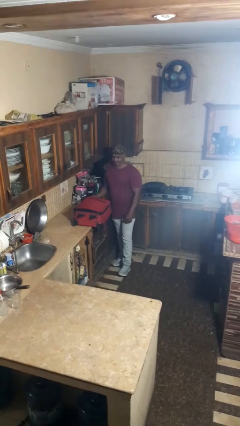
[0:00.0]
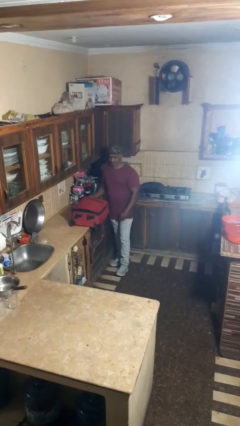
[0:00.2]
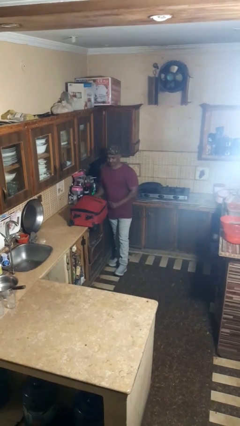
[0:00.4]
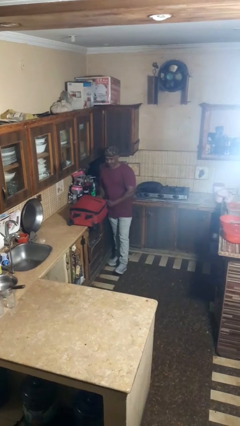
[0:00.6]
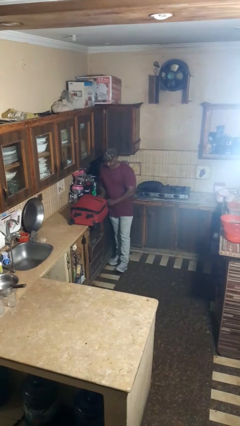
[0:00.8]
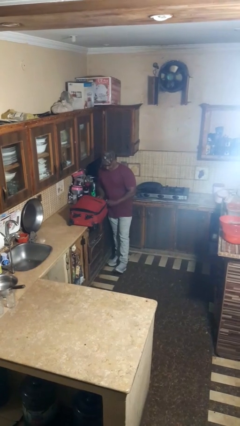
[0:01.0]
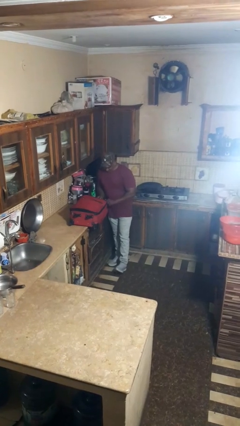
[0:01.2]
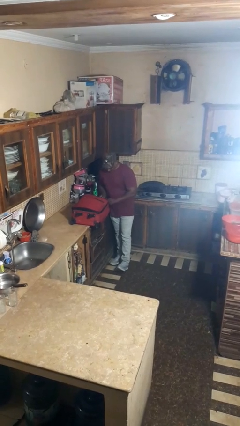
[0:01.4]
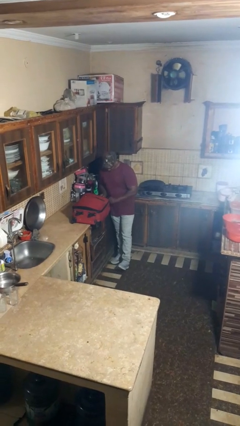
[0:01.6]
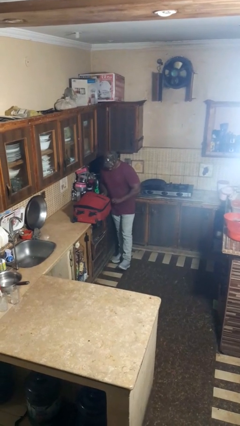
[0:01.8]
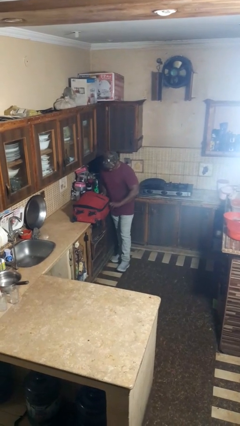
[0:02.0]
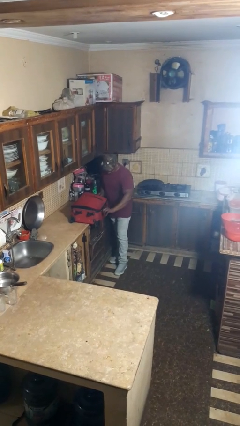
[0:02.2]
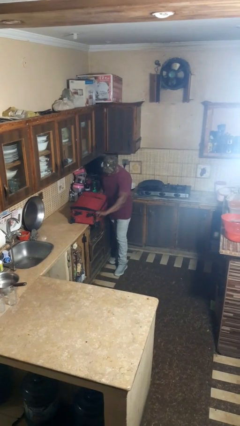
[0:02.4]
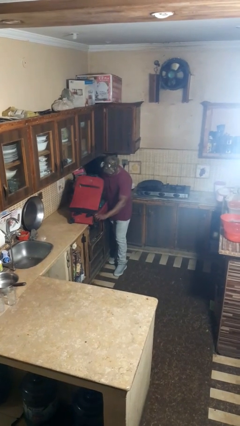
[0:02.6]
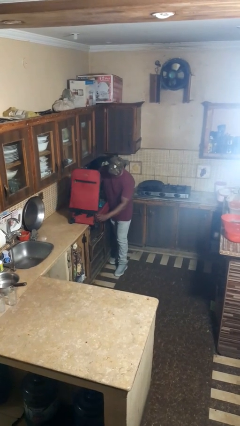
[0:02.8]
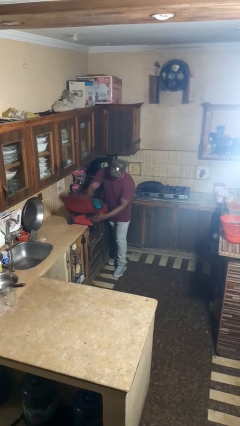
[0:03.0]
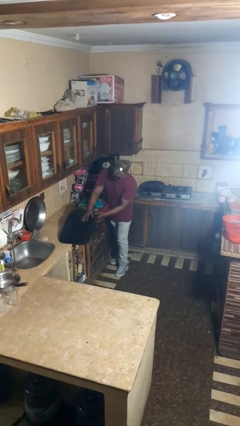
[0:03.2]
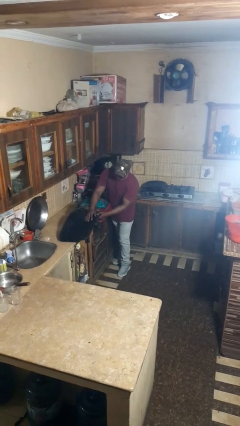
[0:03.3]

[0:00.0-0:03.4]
person opens suitcase

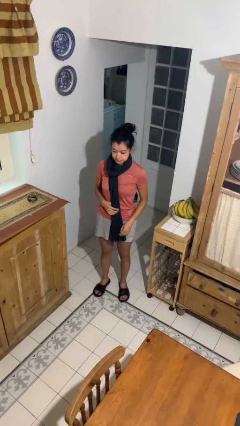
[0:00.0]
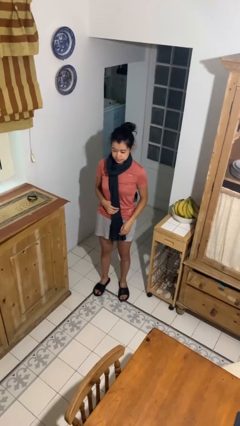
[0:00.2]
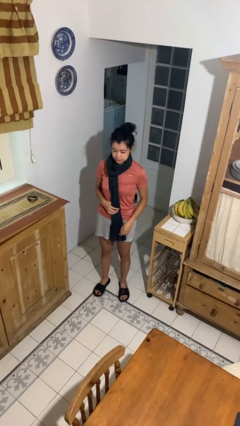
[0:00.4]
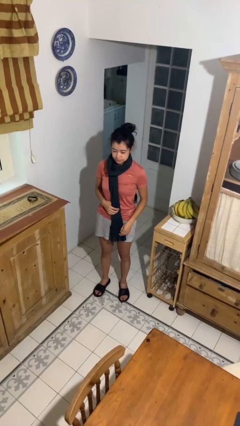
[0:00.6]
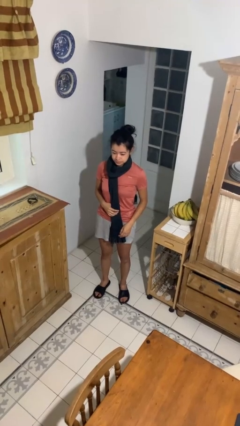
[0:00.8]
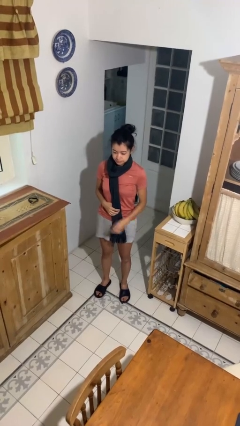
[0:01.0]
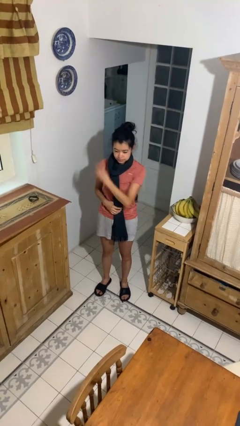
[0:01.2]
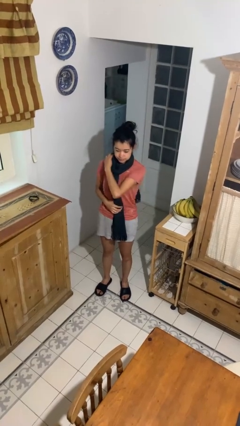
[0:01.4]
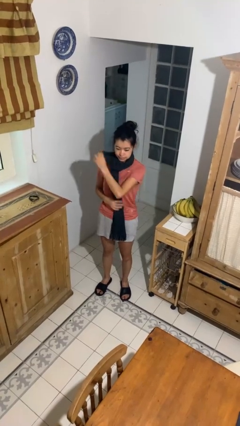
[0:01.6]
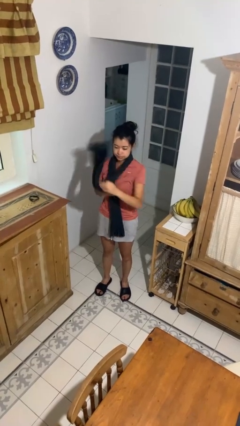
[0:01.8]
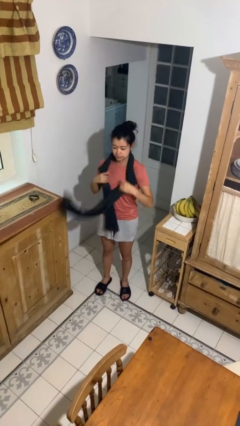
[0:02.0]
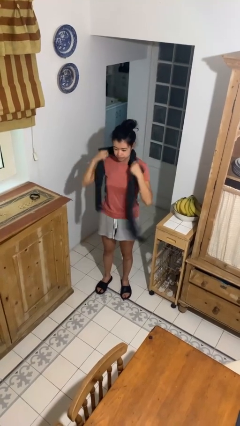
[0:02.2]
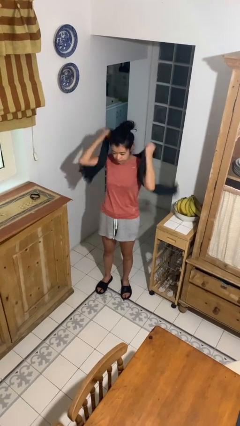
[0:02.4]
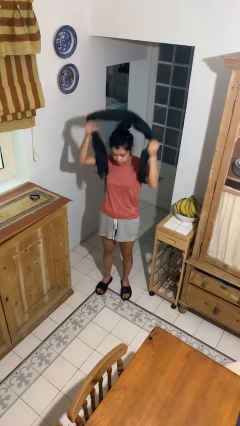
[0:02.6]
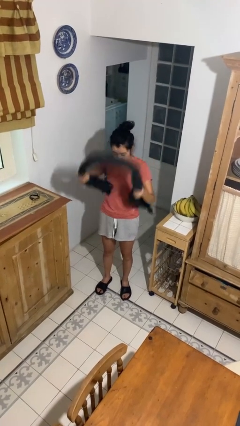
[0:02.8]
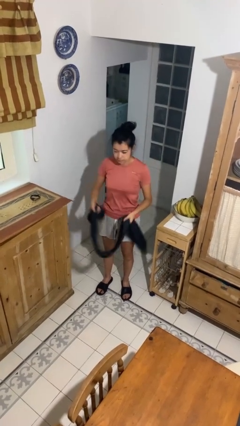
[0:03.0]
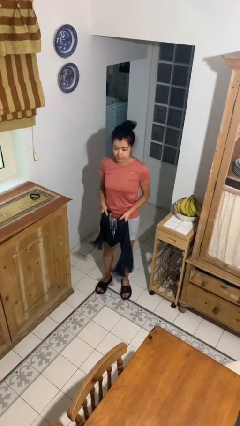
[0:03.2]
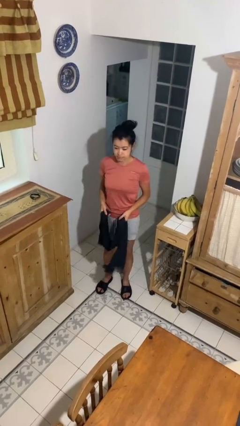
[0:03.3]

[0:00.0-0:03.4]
person takes off scarf

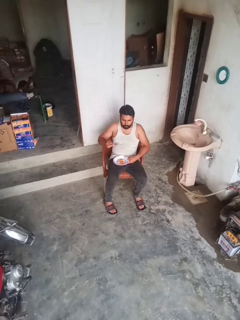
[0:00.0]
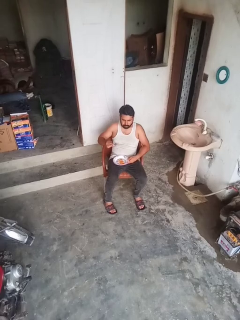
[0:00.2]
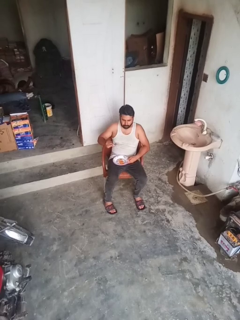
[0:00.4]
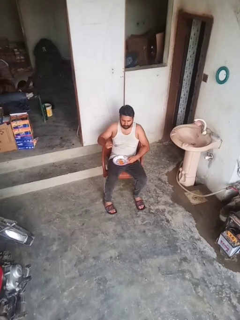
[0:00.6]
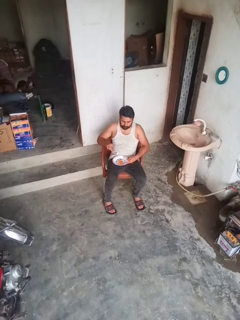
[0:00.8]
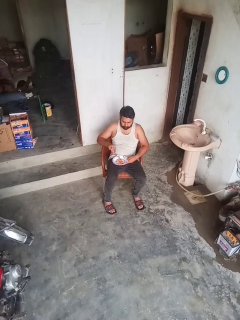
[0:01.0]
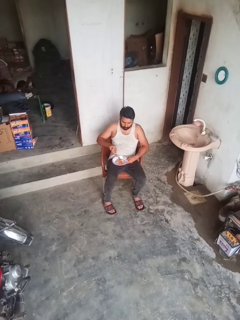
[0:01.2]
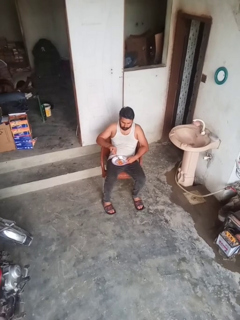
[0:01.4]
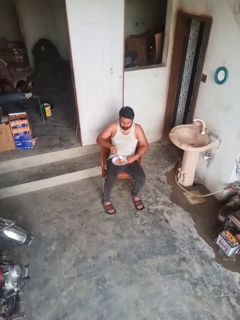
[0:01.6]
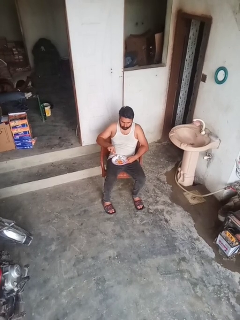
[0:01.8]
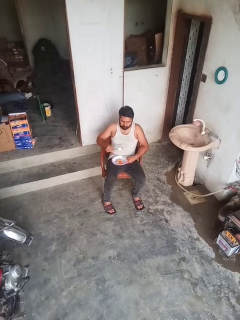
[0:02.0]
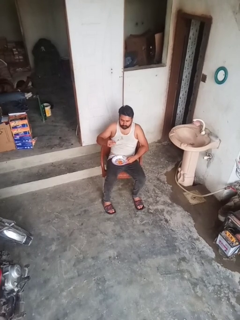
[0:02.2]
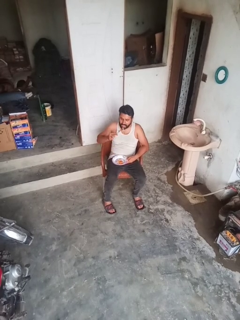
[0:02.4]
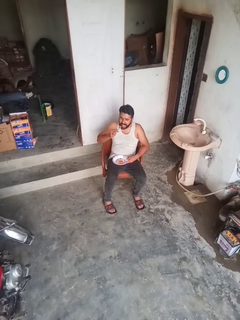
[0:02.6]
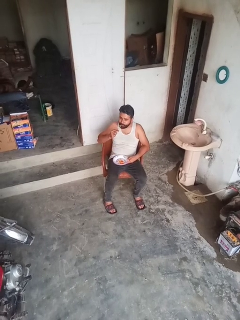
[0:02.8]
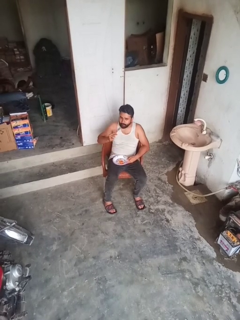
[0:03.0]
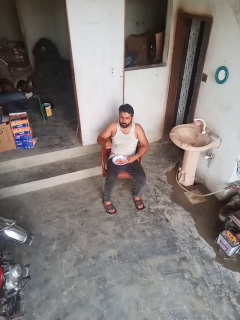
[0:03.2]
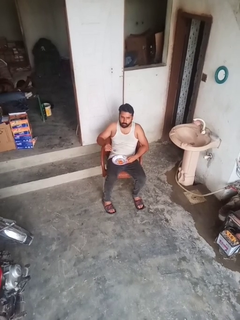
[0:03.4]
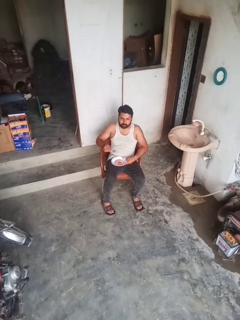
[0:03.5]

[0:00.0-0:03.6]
person eats with utensil

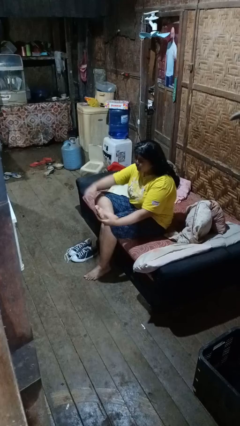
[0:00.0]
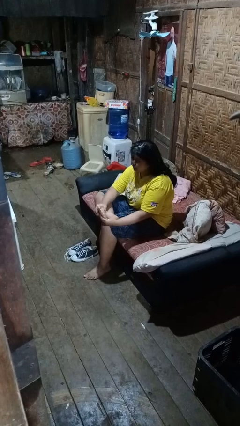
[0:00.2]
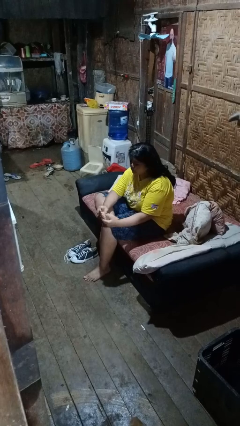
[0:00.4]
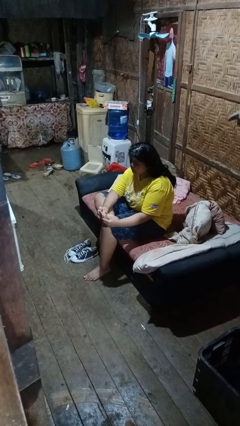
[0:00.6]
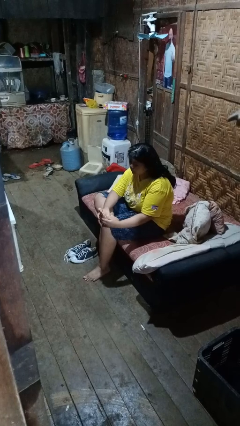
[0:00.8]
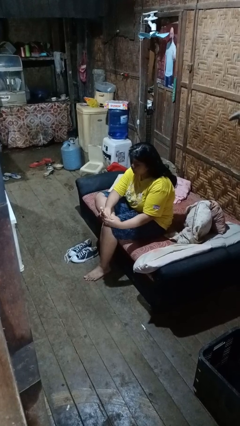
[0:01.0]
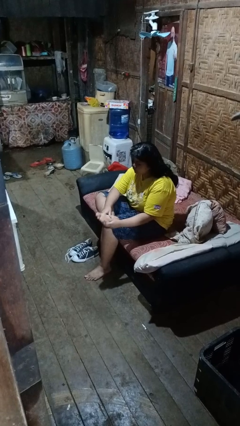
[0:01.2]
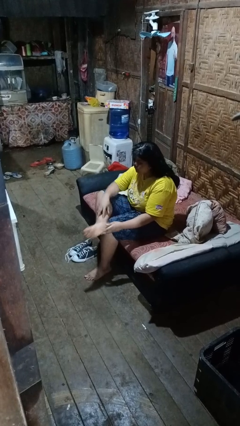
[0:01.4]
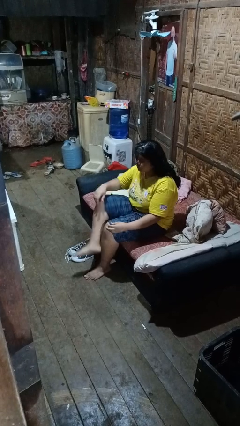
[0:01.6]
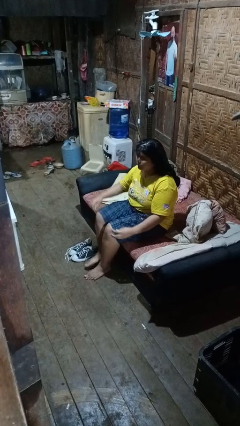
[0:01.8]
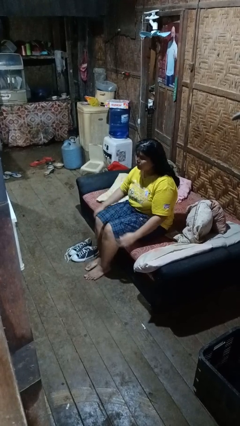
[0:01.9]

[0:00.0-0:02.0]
person rubs foot

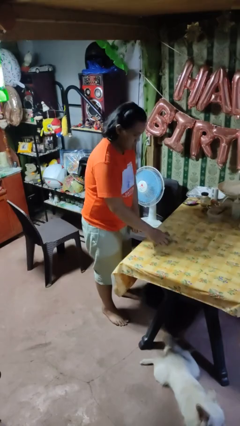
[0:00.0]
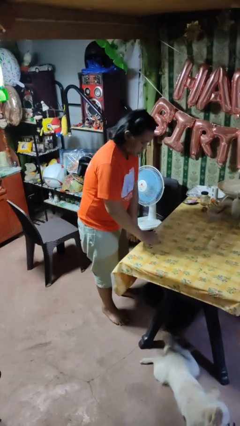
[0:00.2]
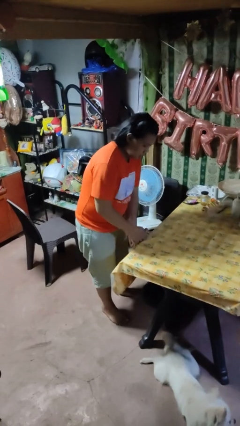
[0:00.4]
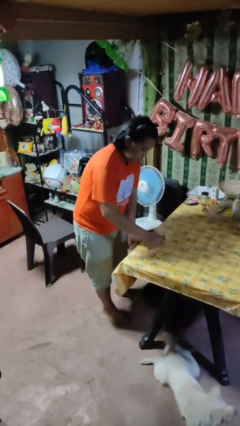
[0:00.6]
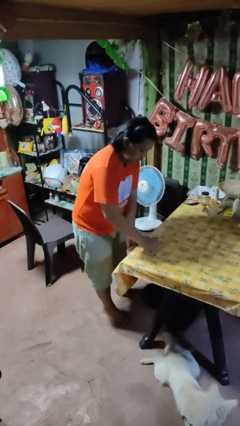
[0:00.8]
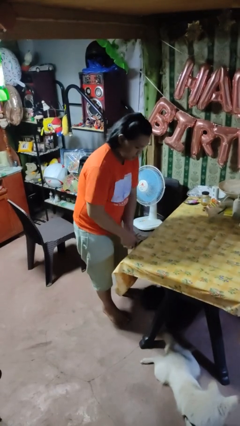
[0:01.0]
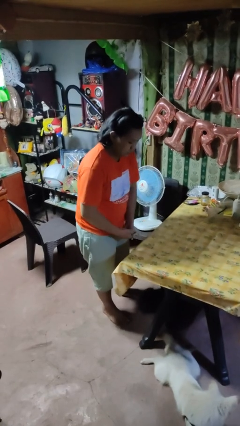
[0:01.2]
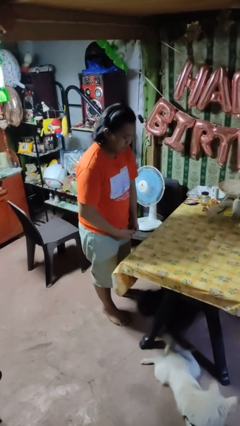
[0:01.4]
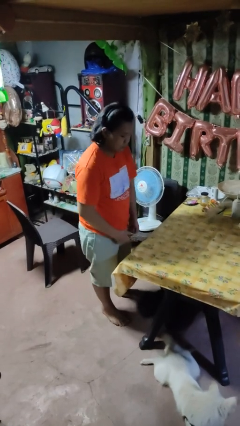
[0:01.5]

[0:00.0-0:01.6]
person cleans table with rag

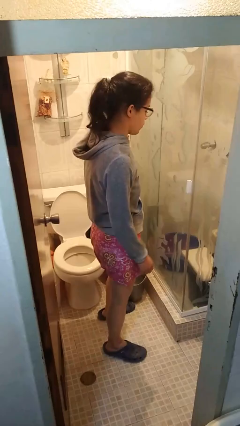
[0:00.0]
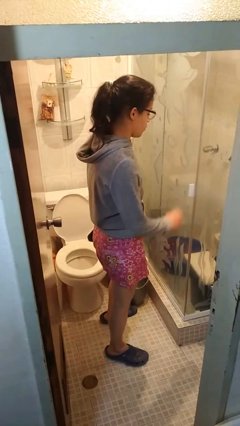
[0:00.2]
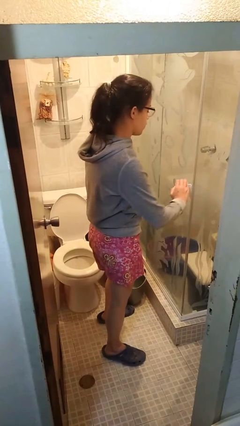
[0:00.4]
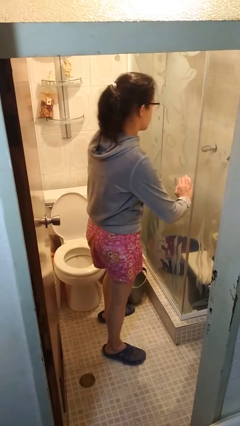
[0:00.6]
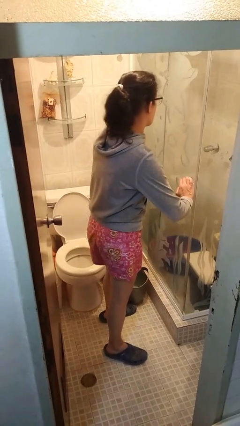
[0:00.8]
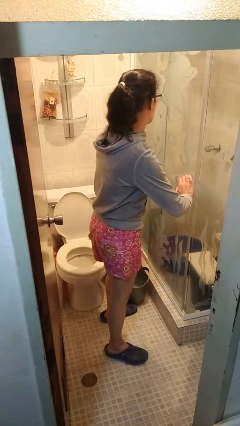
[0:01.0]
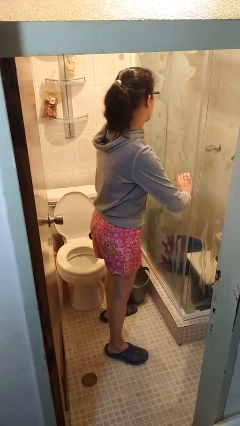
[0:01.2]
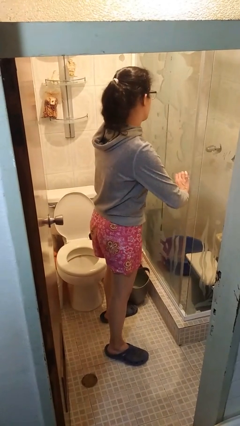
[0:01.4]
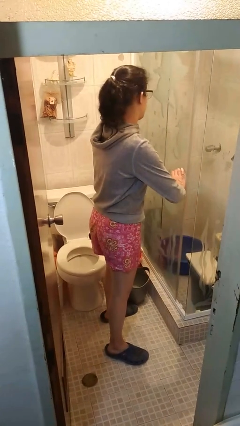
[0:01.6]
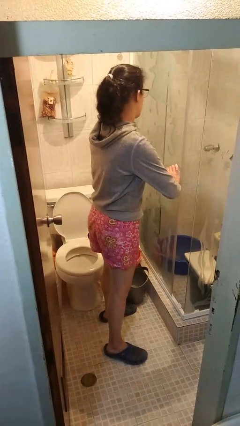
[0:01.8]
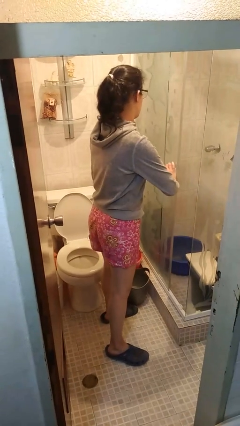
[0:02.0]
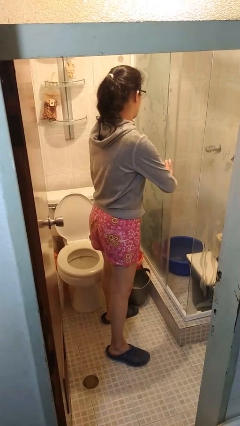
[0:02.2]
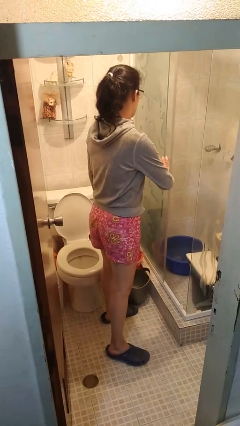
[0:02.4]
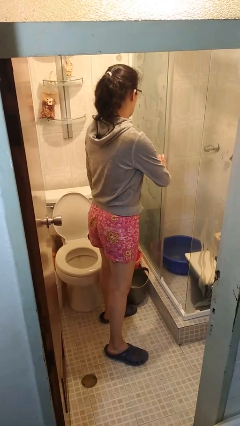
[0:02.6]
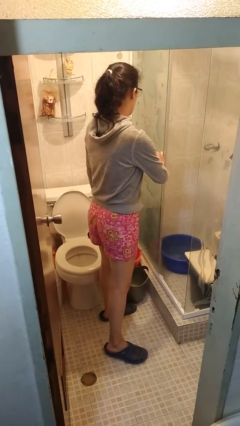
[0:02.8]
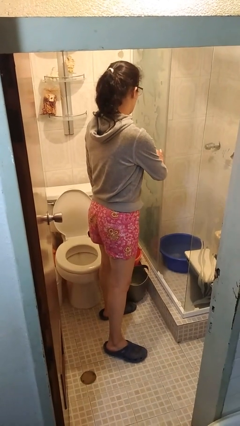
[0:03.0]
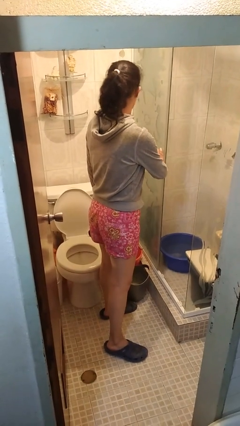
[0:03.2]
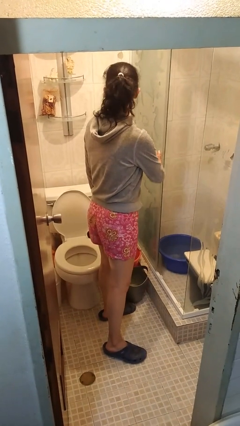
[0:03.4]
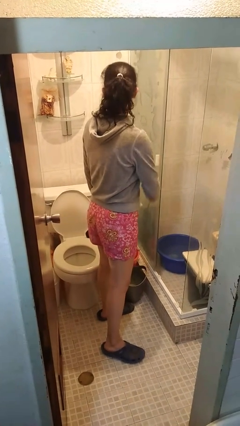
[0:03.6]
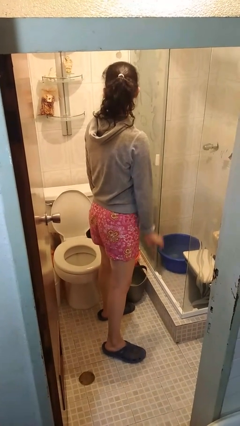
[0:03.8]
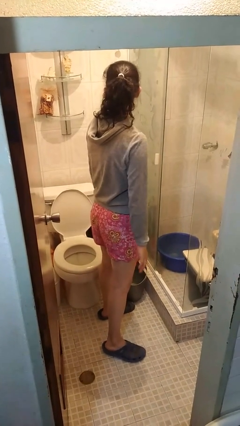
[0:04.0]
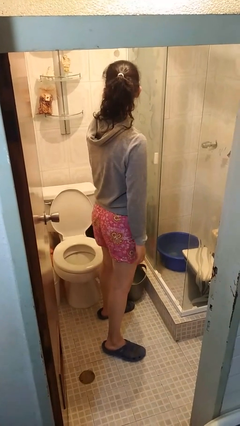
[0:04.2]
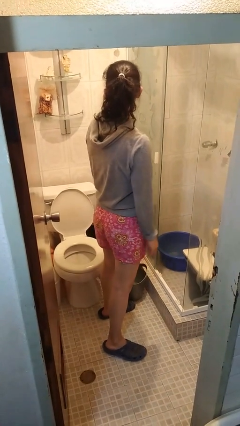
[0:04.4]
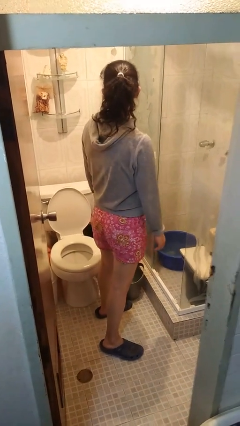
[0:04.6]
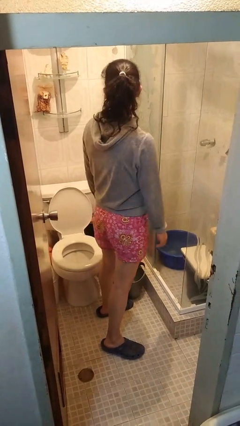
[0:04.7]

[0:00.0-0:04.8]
person opens sliding door
